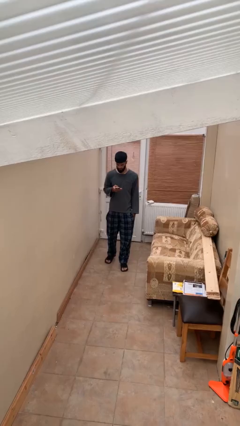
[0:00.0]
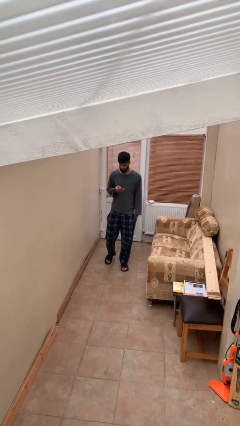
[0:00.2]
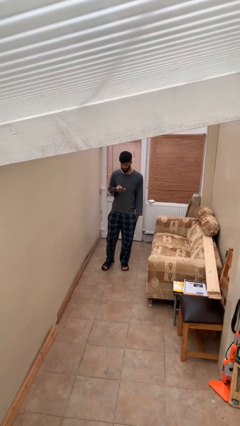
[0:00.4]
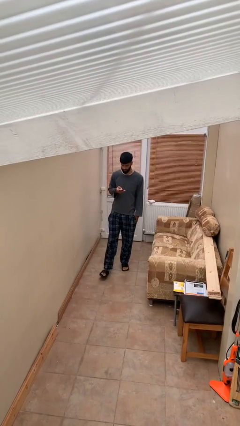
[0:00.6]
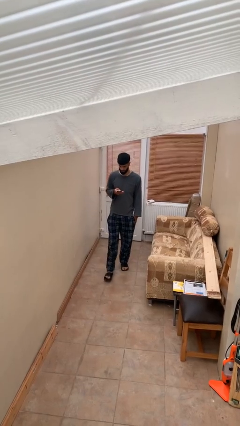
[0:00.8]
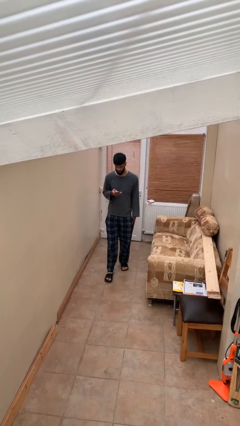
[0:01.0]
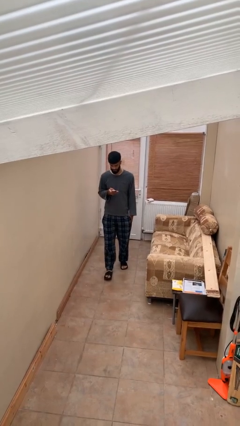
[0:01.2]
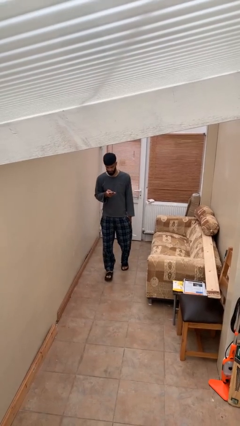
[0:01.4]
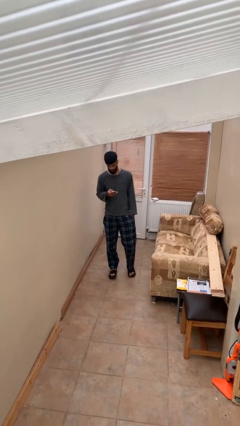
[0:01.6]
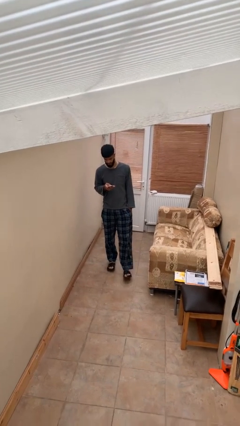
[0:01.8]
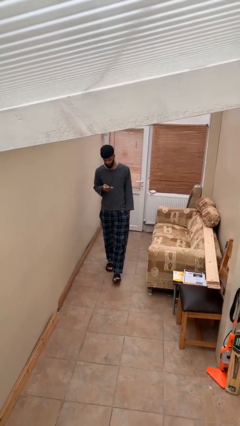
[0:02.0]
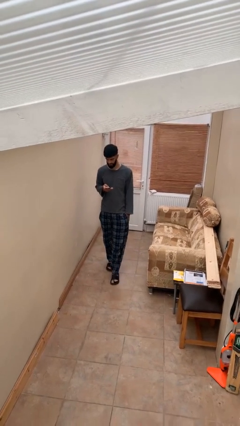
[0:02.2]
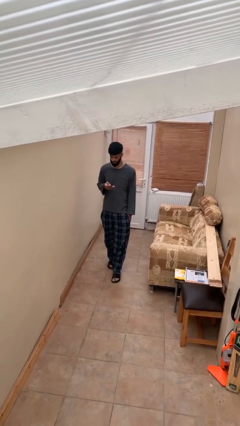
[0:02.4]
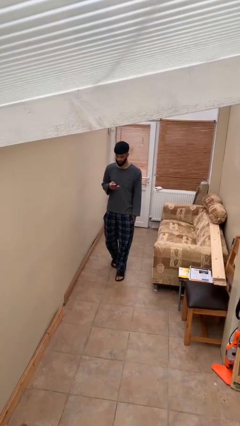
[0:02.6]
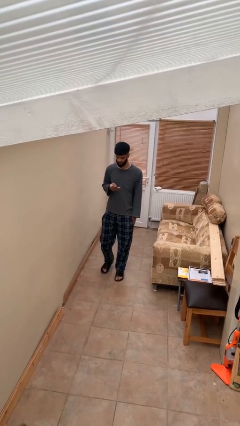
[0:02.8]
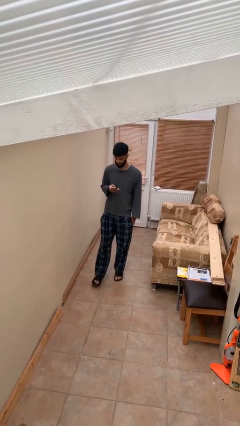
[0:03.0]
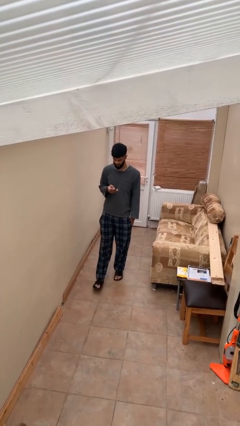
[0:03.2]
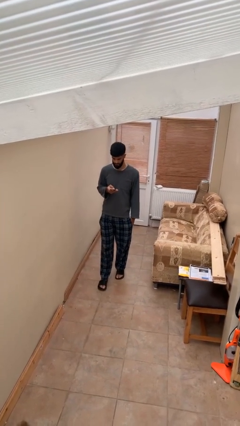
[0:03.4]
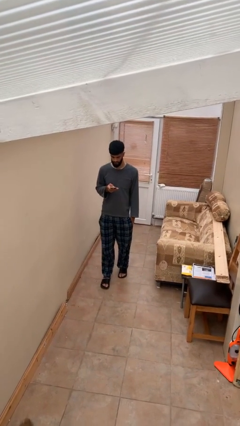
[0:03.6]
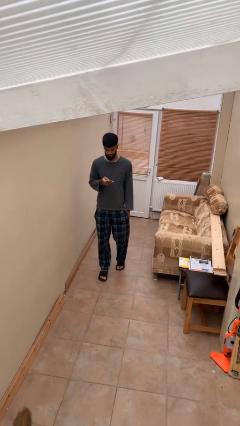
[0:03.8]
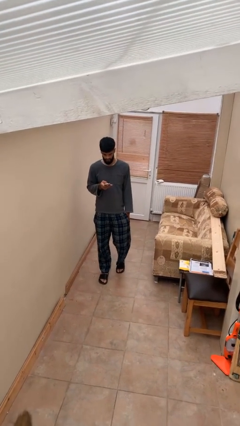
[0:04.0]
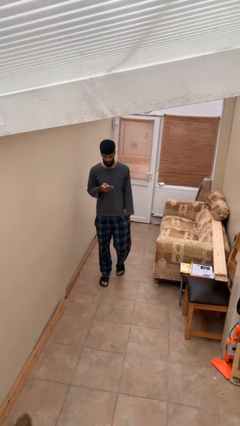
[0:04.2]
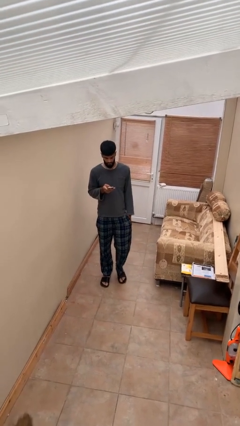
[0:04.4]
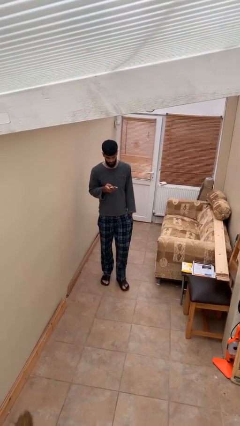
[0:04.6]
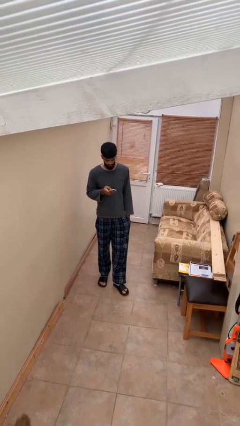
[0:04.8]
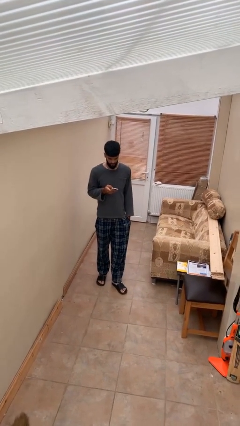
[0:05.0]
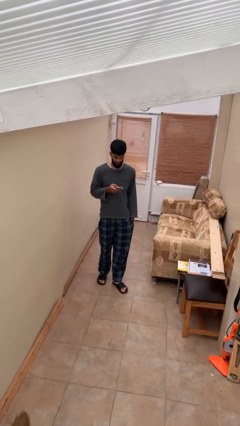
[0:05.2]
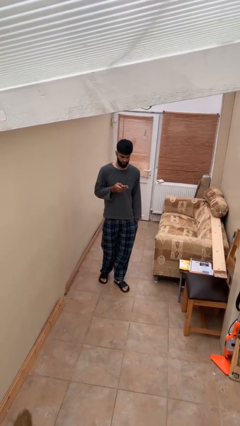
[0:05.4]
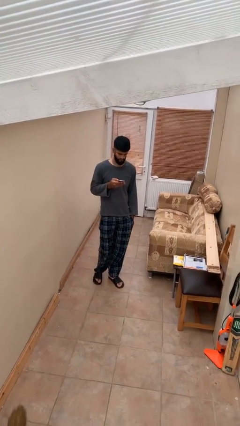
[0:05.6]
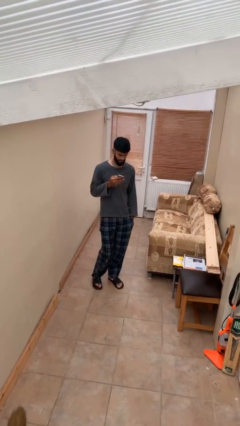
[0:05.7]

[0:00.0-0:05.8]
person texts on phone

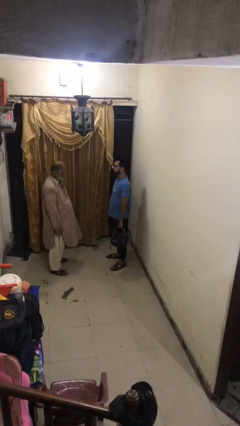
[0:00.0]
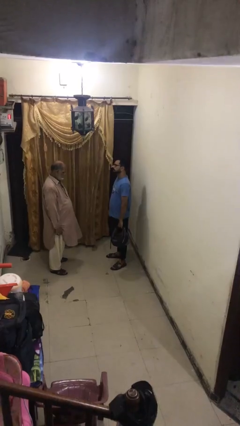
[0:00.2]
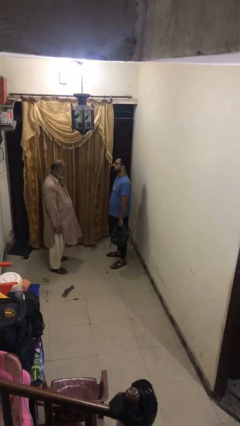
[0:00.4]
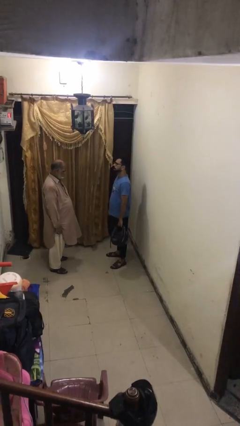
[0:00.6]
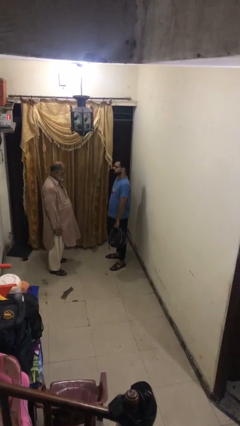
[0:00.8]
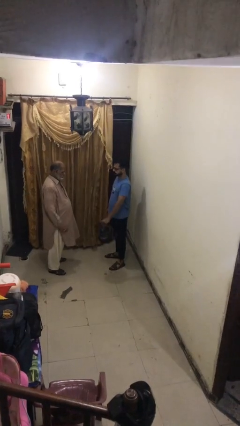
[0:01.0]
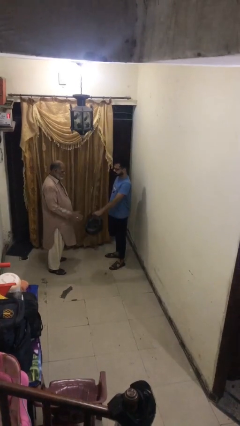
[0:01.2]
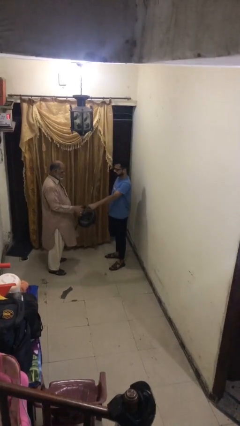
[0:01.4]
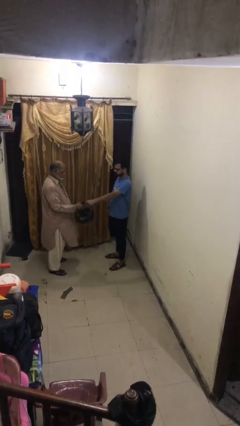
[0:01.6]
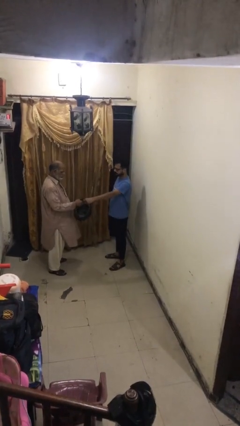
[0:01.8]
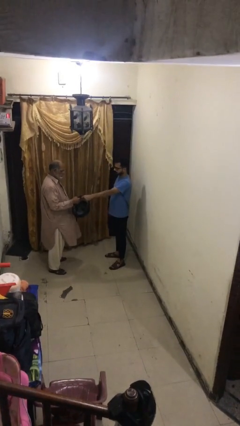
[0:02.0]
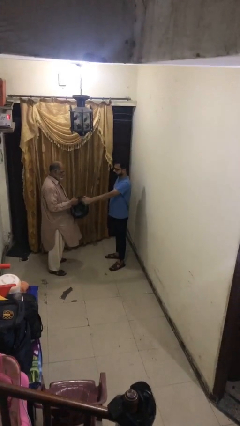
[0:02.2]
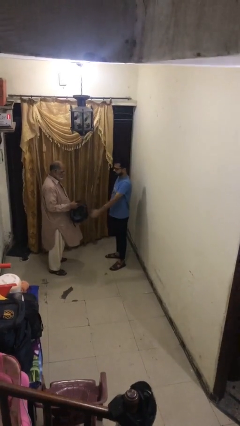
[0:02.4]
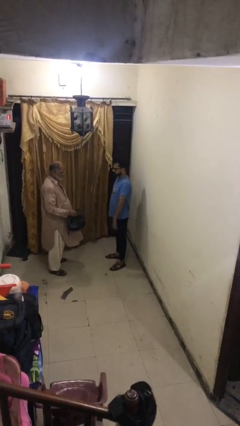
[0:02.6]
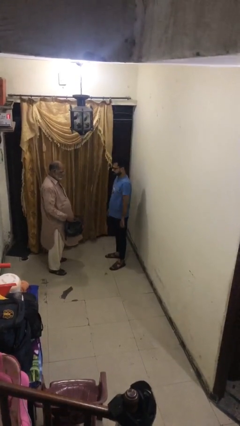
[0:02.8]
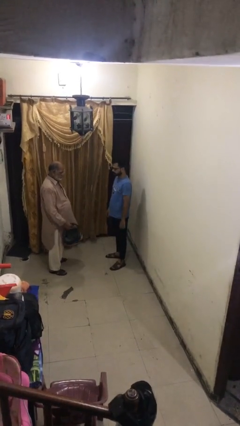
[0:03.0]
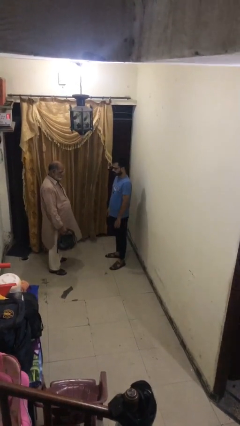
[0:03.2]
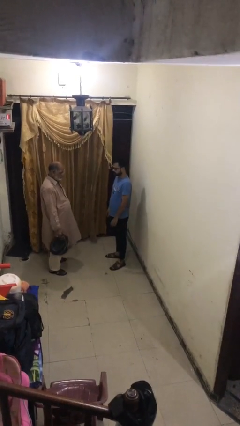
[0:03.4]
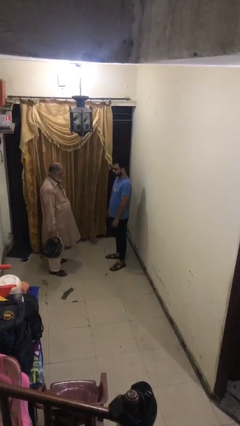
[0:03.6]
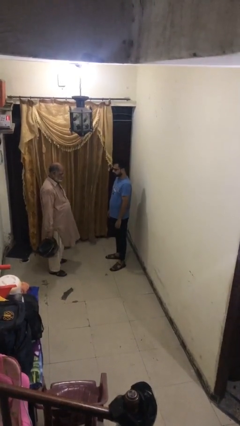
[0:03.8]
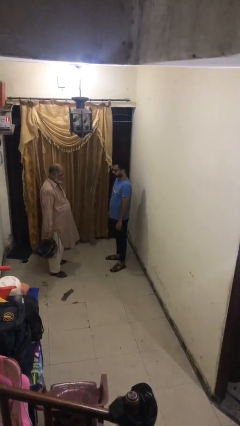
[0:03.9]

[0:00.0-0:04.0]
person transfers object to person

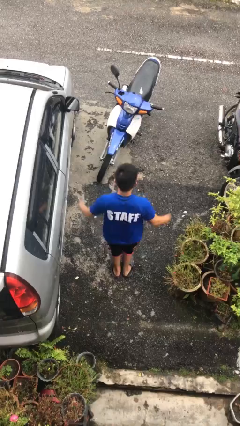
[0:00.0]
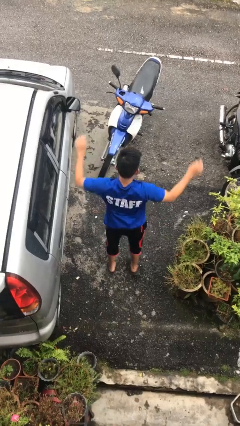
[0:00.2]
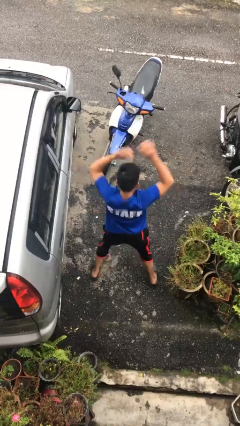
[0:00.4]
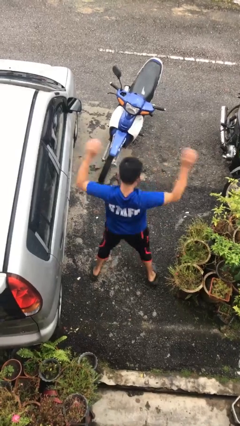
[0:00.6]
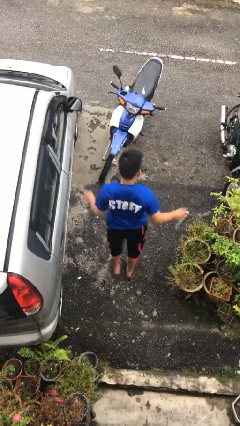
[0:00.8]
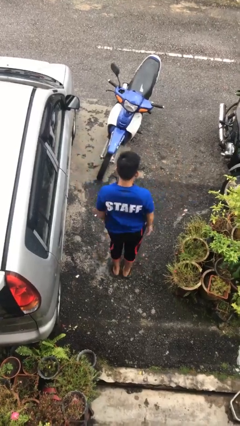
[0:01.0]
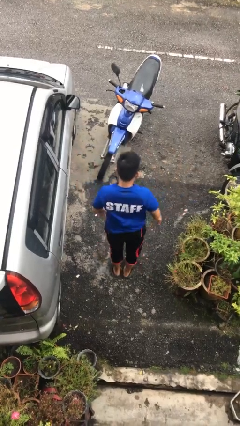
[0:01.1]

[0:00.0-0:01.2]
person exercises with jumping jacks

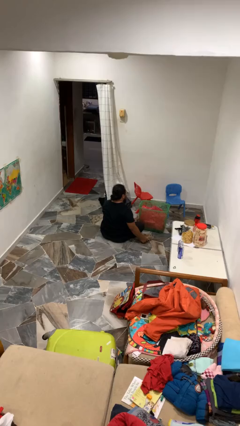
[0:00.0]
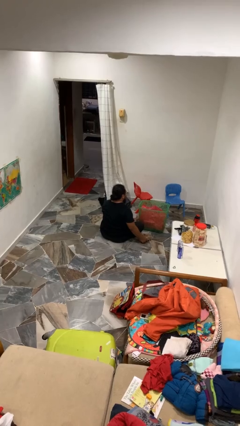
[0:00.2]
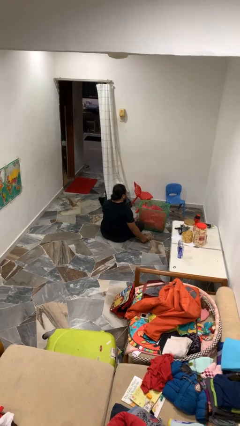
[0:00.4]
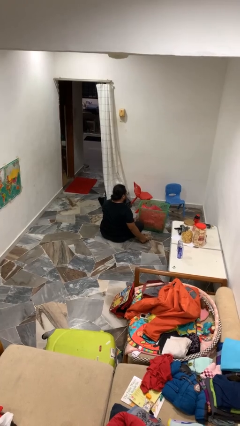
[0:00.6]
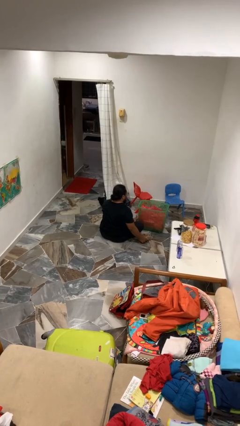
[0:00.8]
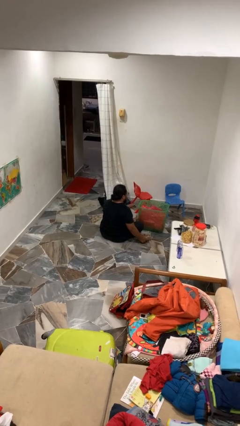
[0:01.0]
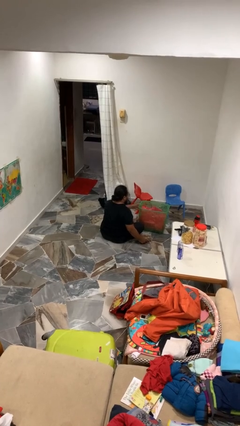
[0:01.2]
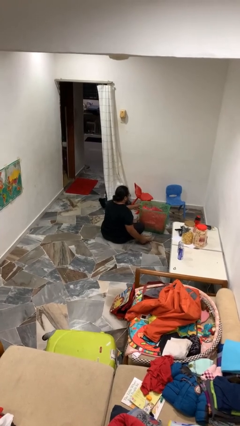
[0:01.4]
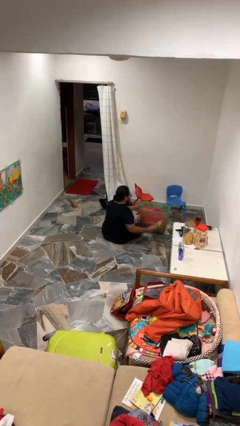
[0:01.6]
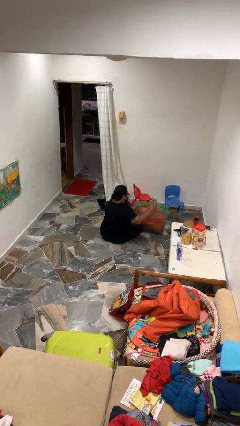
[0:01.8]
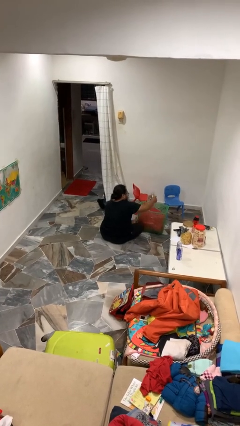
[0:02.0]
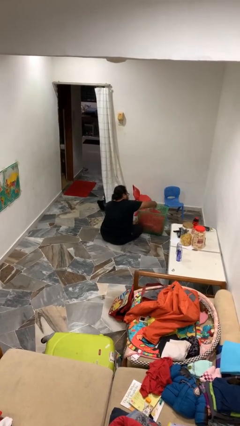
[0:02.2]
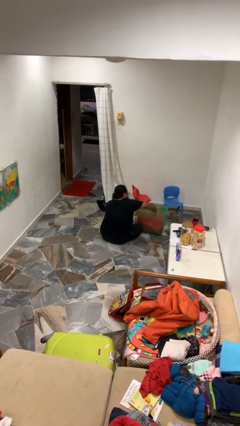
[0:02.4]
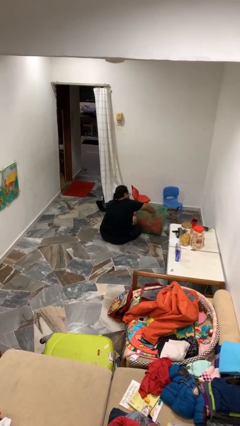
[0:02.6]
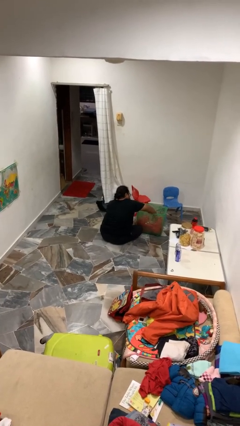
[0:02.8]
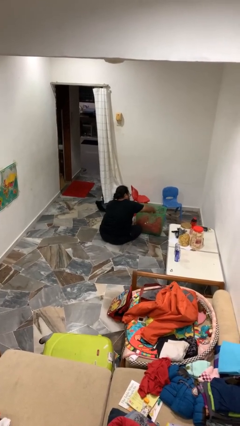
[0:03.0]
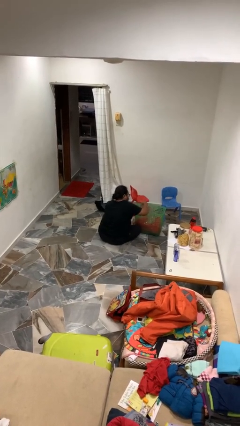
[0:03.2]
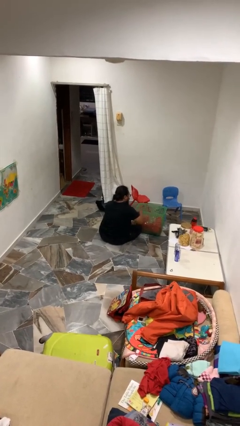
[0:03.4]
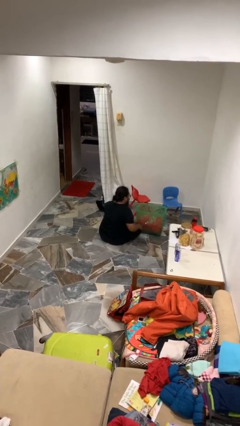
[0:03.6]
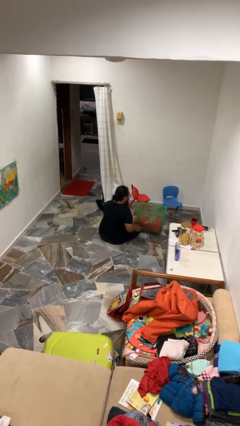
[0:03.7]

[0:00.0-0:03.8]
person puts object into basket

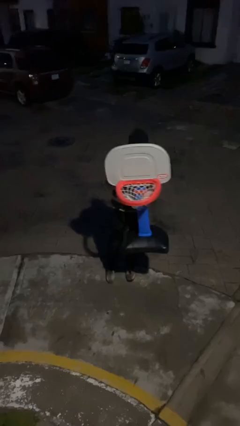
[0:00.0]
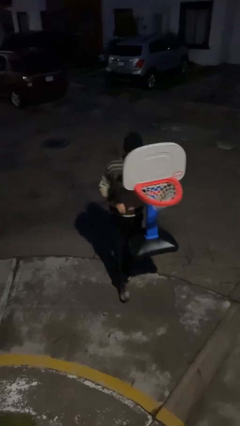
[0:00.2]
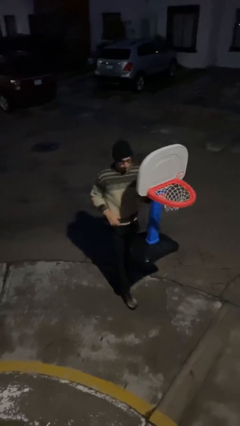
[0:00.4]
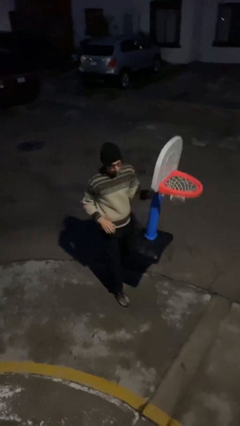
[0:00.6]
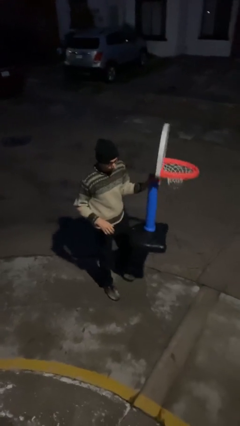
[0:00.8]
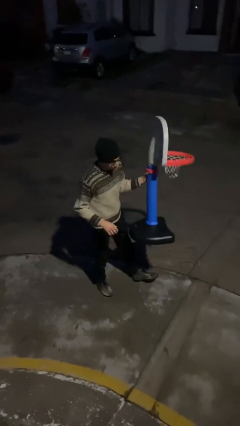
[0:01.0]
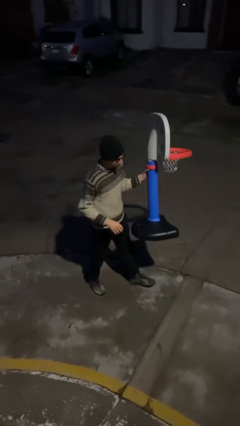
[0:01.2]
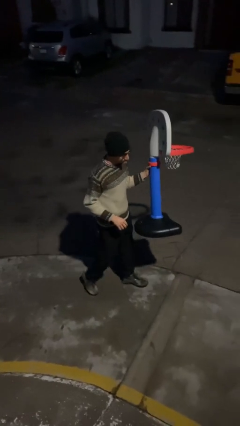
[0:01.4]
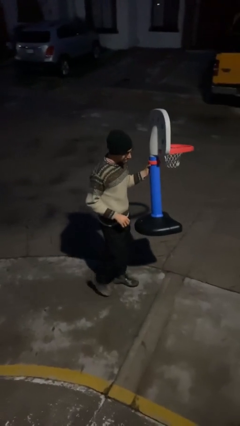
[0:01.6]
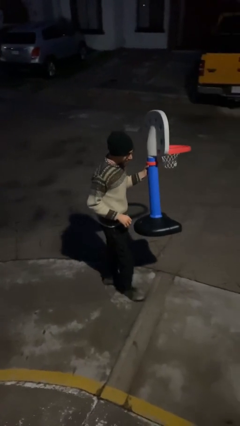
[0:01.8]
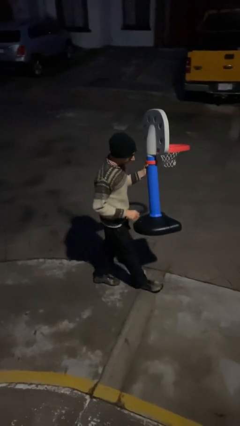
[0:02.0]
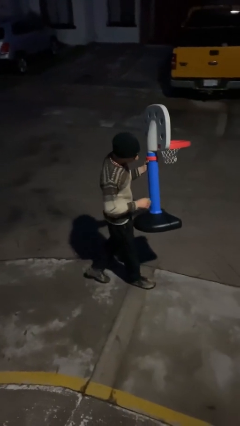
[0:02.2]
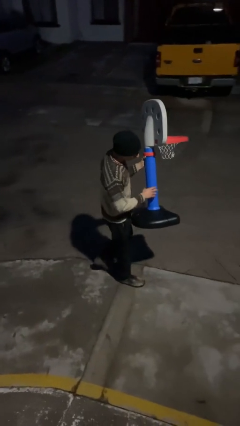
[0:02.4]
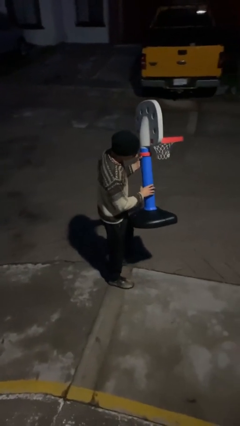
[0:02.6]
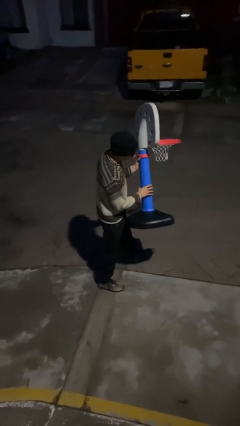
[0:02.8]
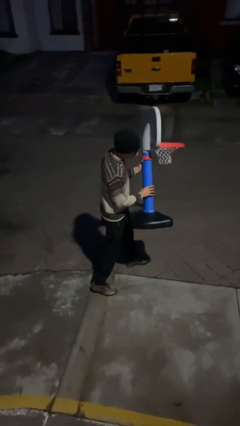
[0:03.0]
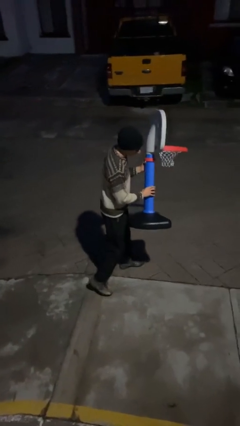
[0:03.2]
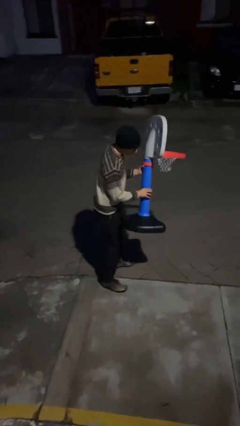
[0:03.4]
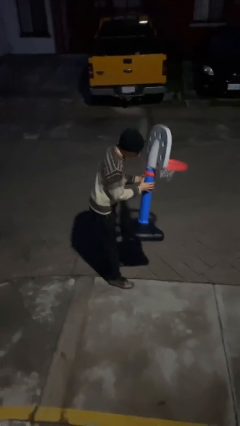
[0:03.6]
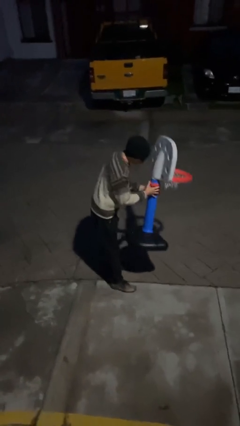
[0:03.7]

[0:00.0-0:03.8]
person carries heavy object
